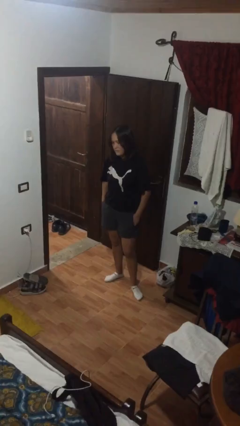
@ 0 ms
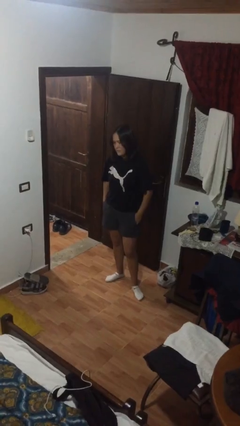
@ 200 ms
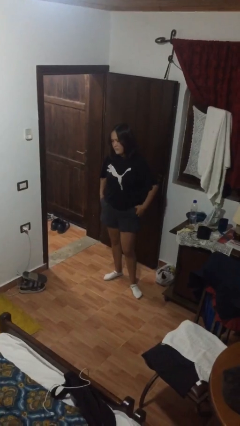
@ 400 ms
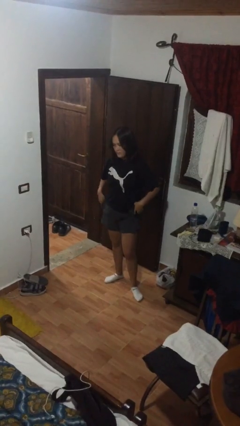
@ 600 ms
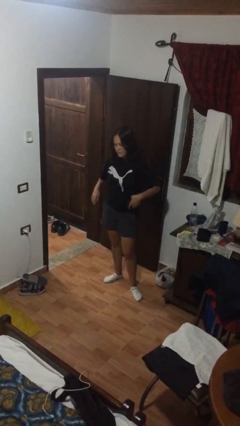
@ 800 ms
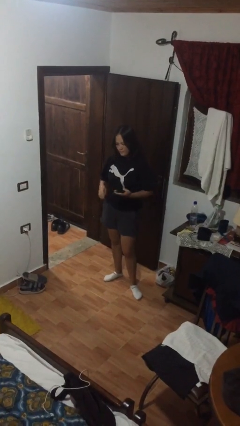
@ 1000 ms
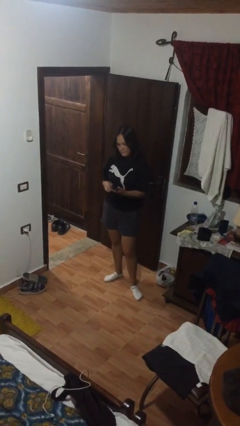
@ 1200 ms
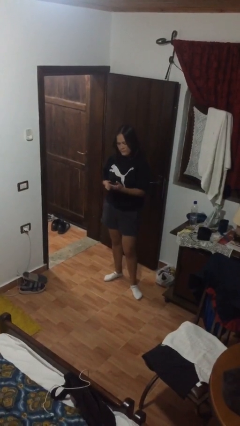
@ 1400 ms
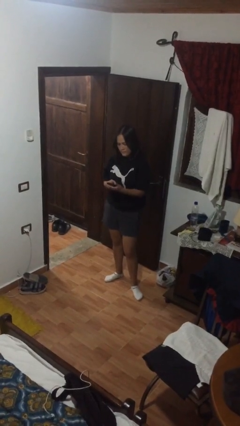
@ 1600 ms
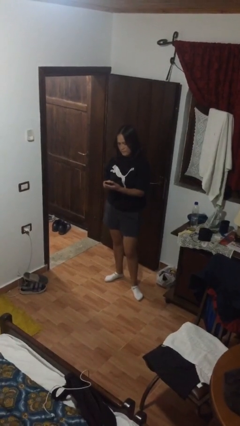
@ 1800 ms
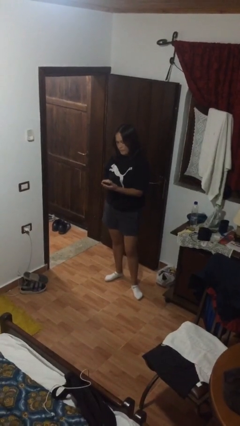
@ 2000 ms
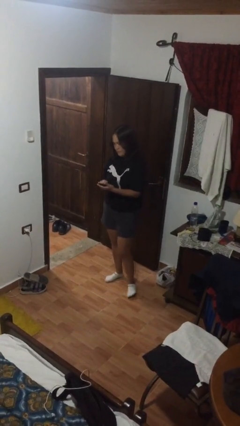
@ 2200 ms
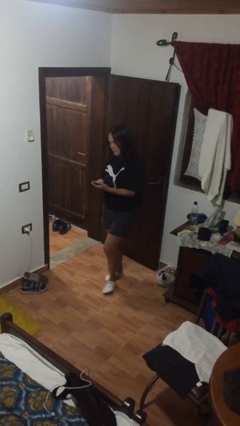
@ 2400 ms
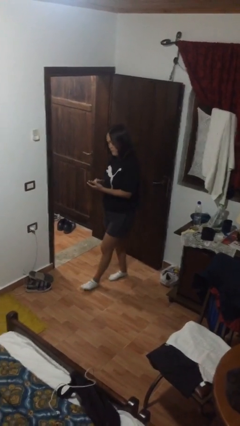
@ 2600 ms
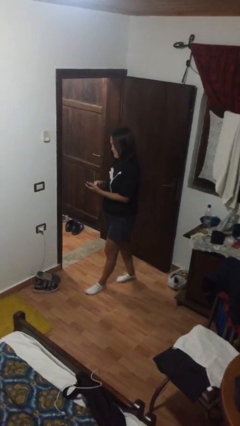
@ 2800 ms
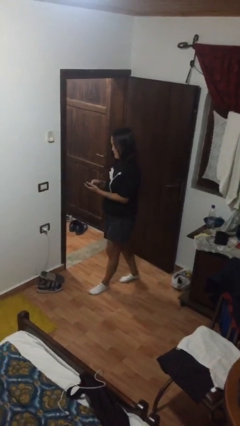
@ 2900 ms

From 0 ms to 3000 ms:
person takes phone from pocket

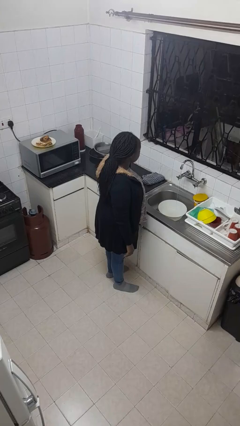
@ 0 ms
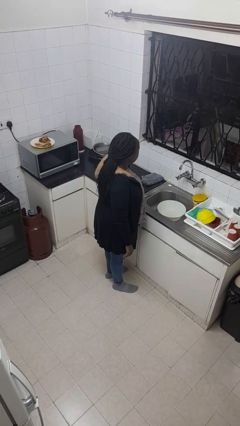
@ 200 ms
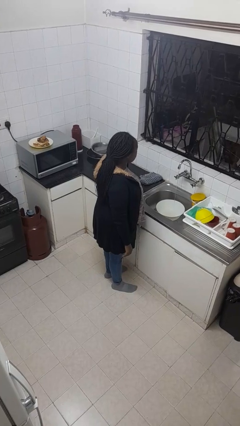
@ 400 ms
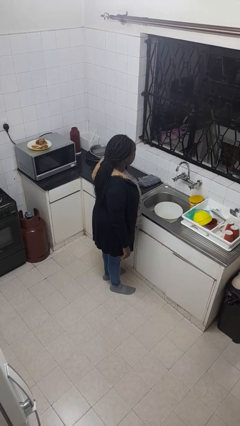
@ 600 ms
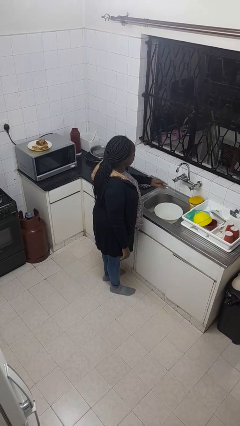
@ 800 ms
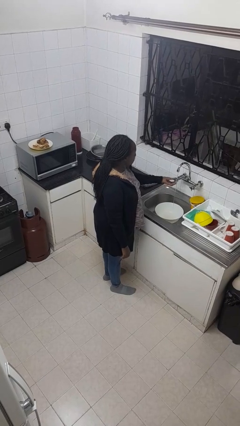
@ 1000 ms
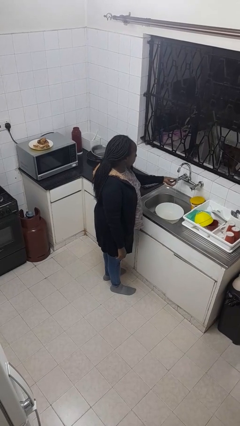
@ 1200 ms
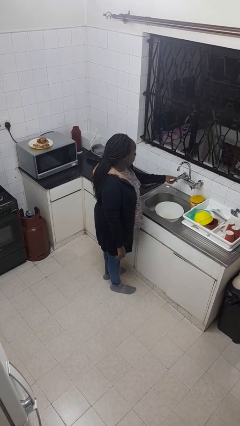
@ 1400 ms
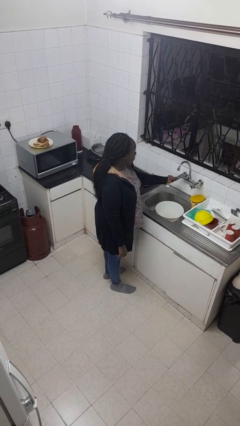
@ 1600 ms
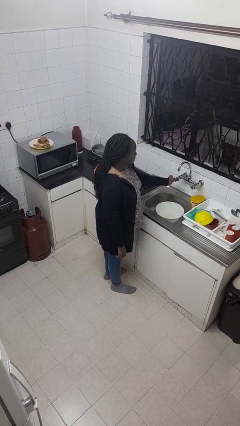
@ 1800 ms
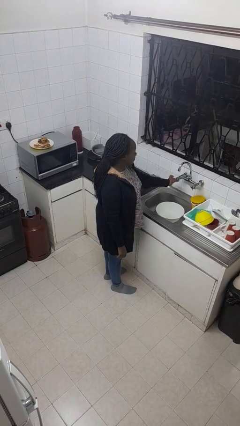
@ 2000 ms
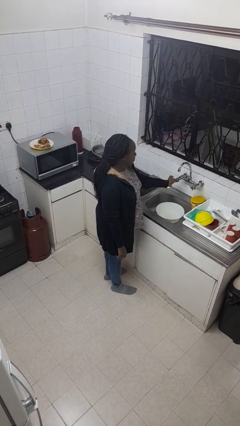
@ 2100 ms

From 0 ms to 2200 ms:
person turns off faucet

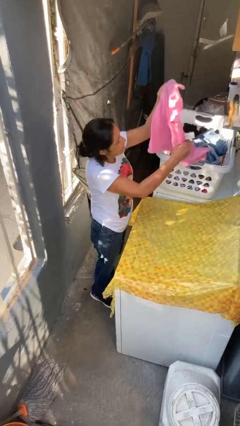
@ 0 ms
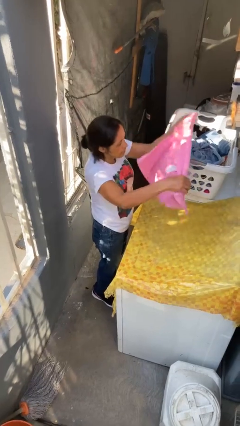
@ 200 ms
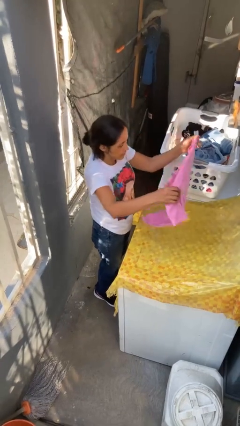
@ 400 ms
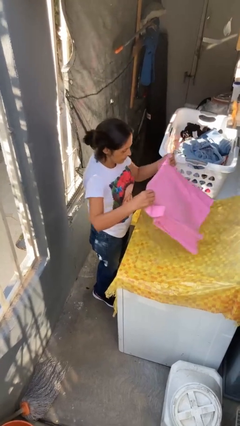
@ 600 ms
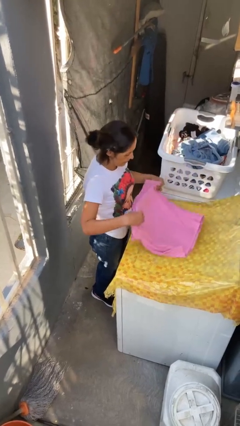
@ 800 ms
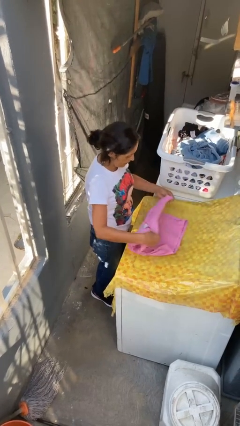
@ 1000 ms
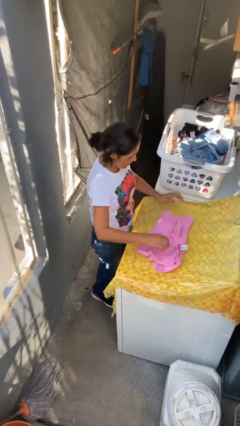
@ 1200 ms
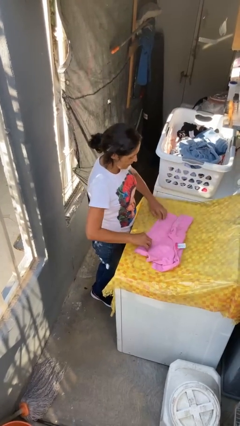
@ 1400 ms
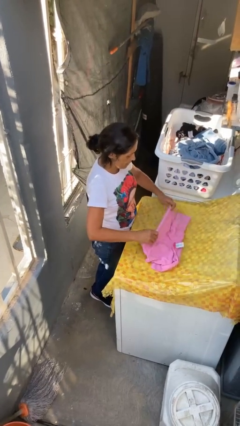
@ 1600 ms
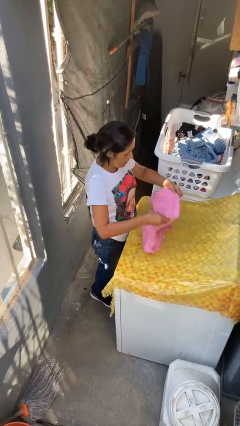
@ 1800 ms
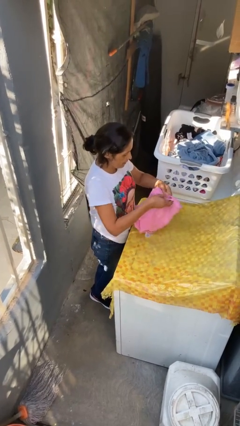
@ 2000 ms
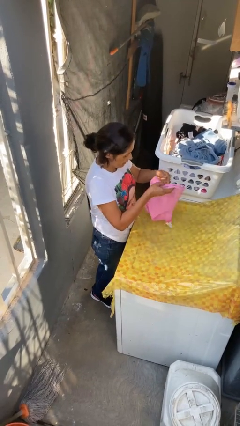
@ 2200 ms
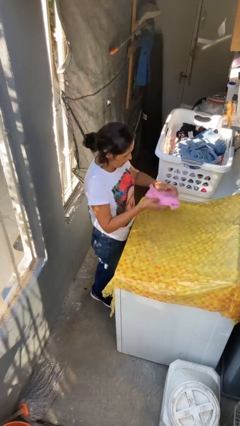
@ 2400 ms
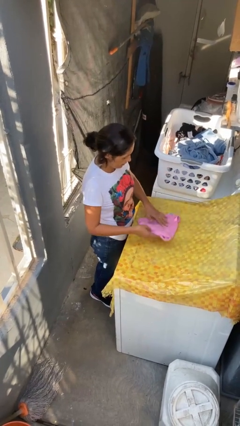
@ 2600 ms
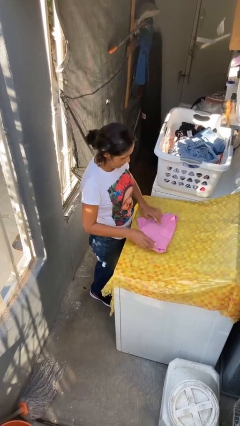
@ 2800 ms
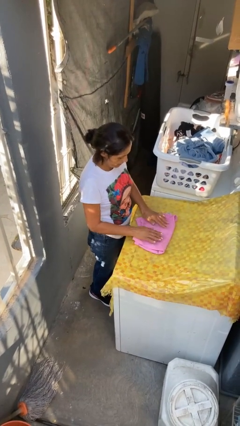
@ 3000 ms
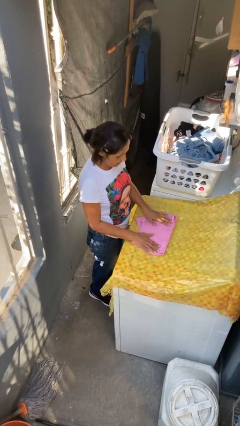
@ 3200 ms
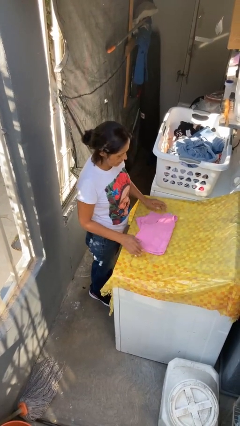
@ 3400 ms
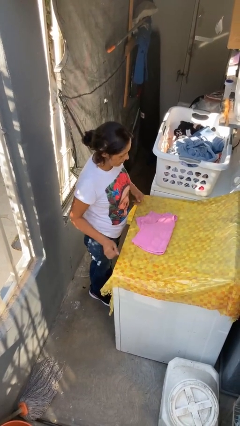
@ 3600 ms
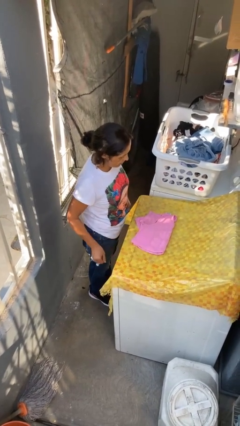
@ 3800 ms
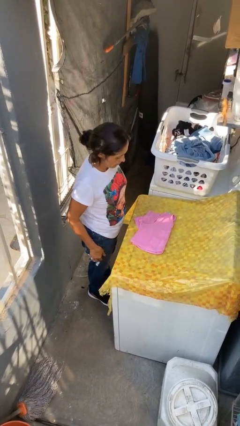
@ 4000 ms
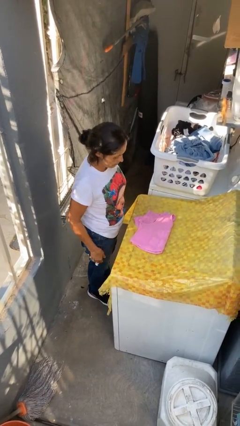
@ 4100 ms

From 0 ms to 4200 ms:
person folds shirt

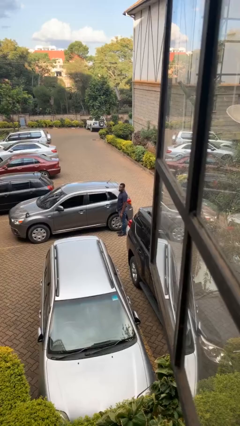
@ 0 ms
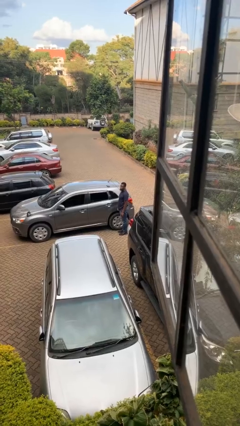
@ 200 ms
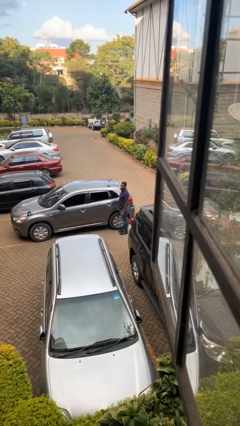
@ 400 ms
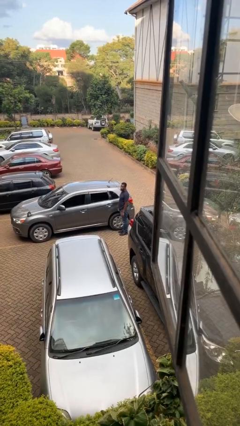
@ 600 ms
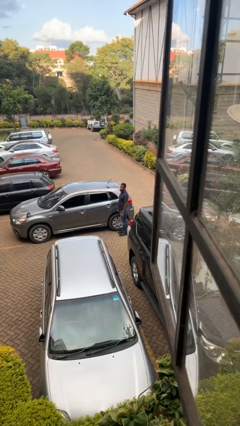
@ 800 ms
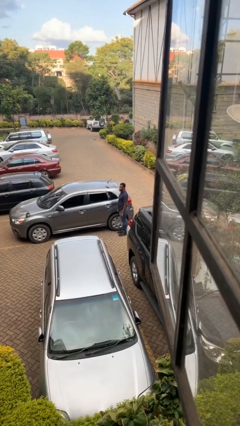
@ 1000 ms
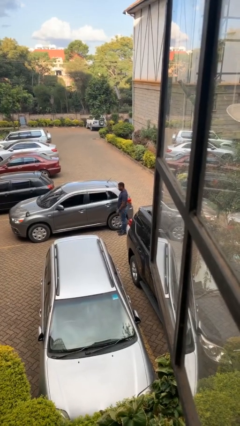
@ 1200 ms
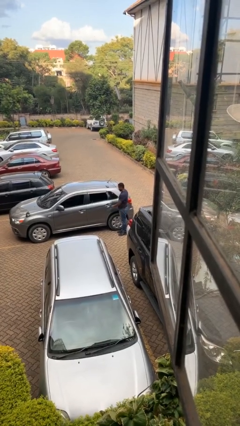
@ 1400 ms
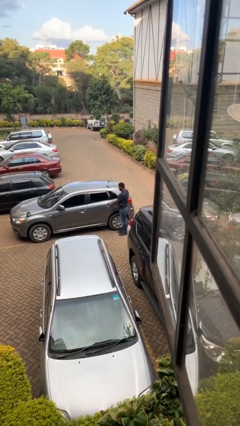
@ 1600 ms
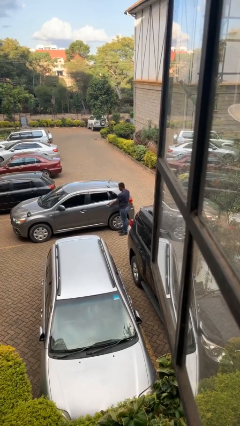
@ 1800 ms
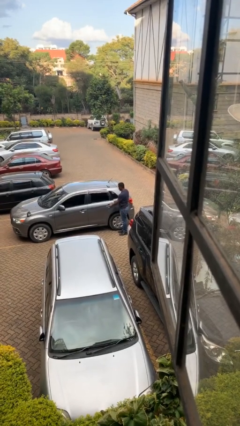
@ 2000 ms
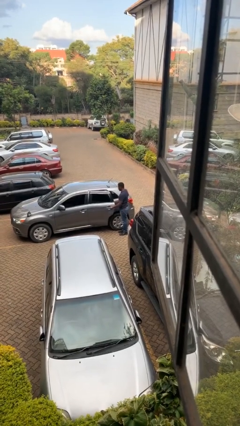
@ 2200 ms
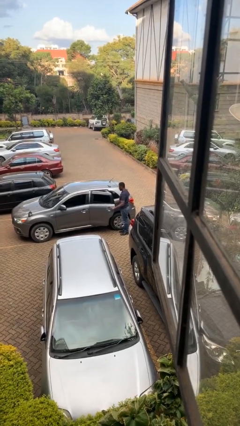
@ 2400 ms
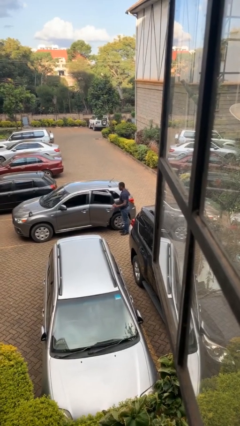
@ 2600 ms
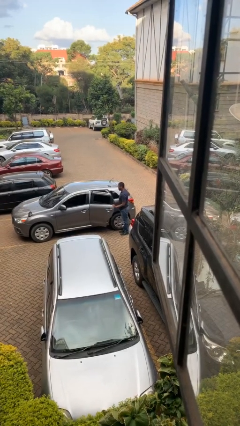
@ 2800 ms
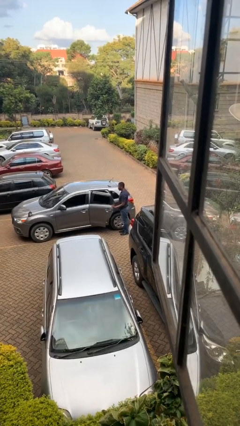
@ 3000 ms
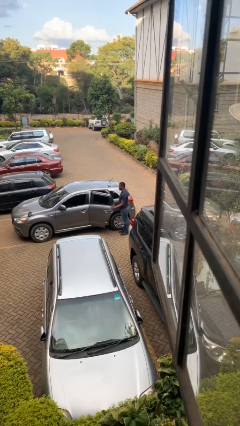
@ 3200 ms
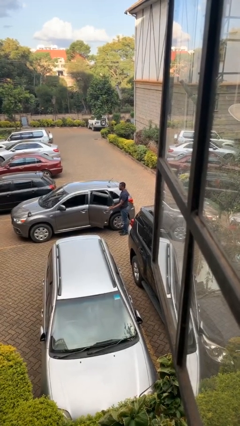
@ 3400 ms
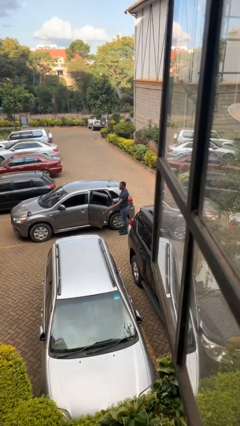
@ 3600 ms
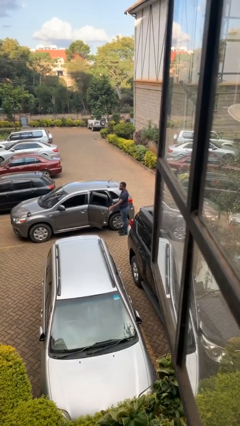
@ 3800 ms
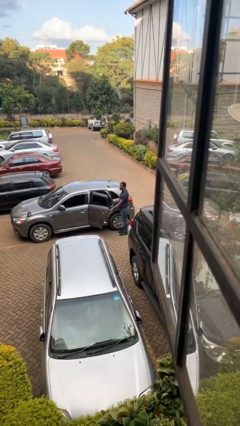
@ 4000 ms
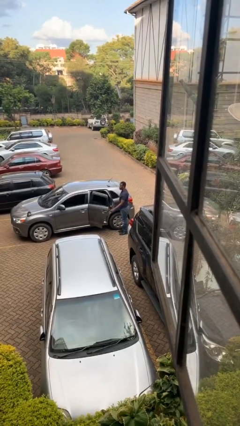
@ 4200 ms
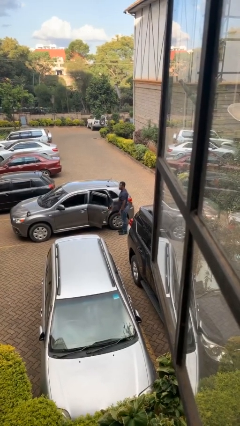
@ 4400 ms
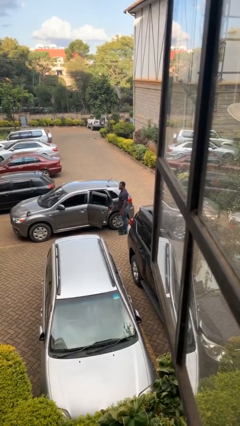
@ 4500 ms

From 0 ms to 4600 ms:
person opens car door

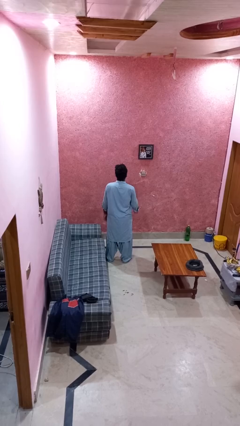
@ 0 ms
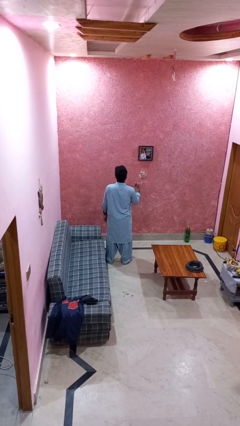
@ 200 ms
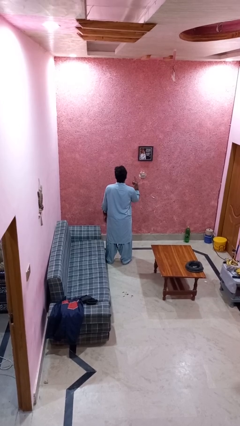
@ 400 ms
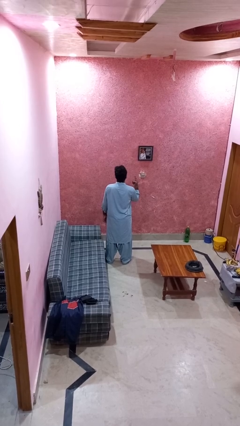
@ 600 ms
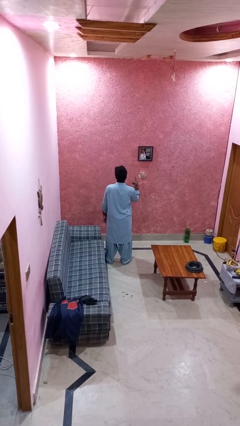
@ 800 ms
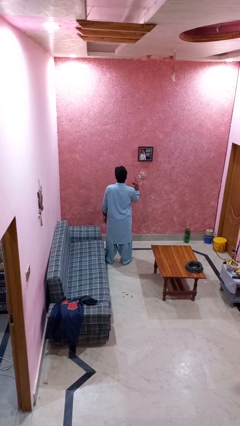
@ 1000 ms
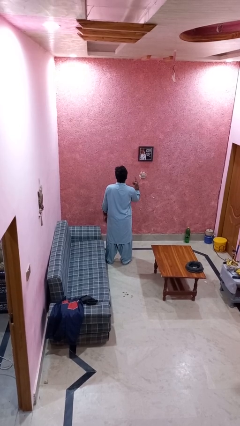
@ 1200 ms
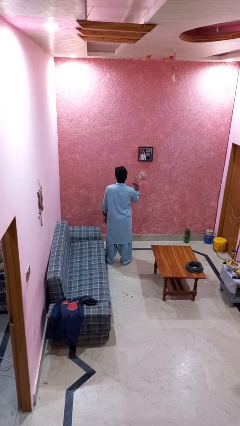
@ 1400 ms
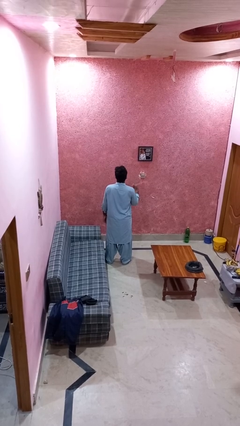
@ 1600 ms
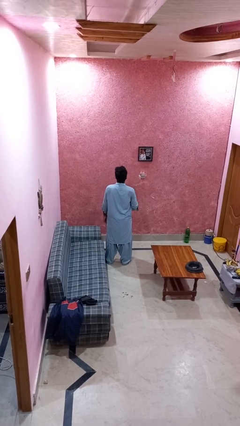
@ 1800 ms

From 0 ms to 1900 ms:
person gestures number one

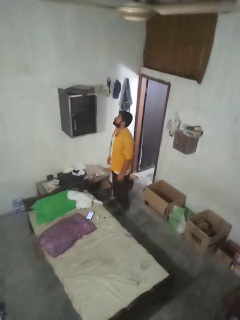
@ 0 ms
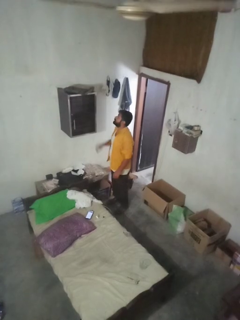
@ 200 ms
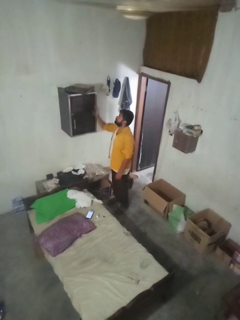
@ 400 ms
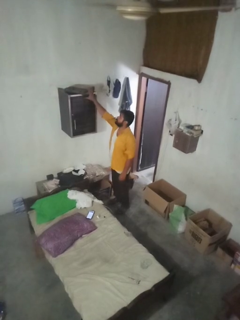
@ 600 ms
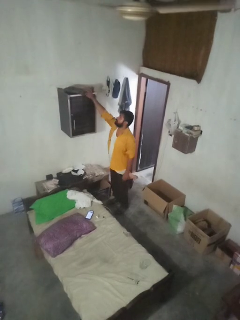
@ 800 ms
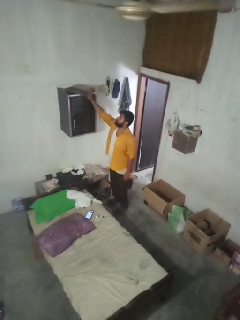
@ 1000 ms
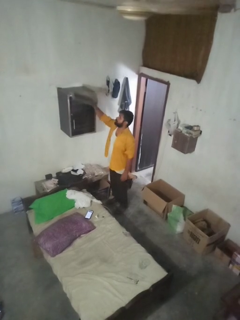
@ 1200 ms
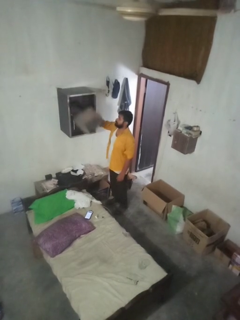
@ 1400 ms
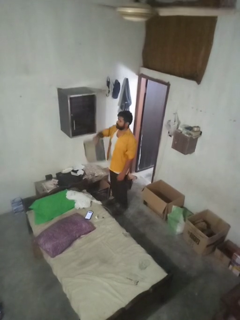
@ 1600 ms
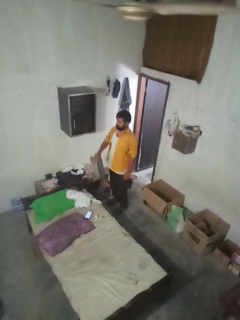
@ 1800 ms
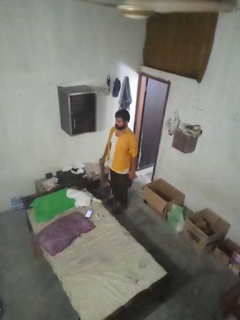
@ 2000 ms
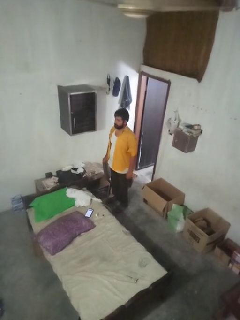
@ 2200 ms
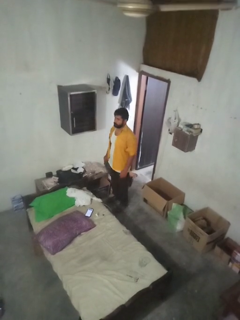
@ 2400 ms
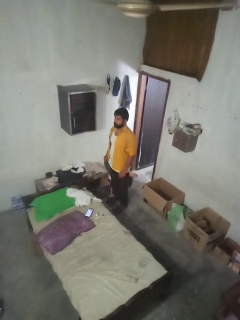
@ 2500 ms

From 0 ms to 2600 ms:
person picks up object from shelf
